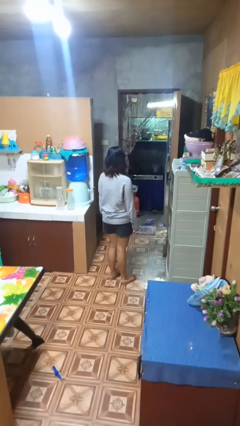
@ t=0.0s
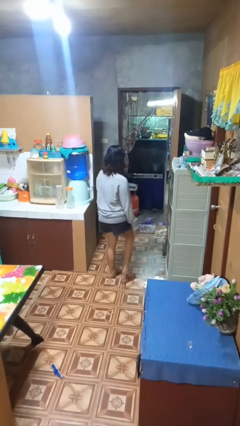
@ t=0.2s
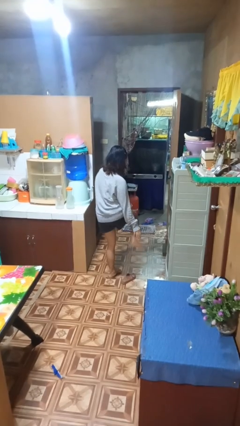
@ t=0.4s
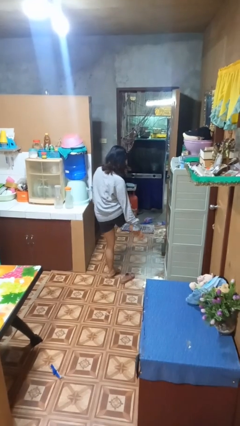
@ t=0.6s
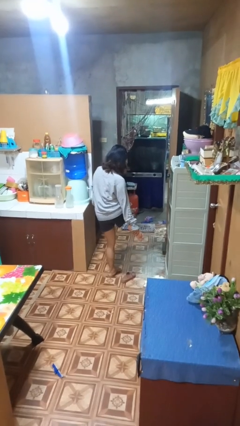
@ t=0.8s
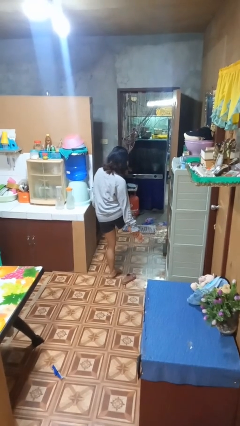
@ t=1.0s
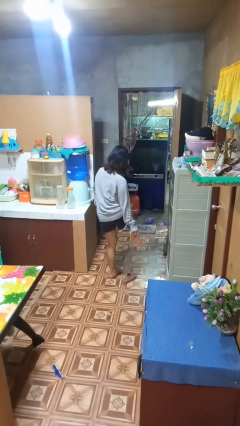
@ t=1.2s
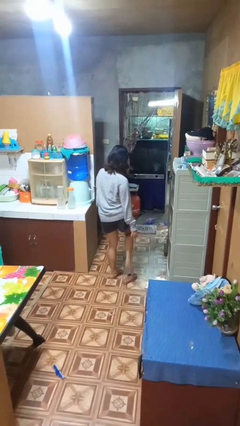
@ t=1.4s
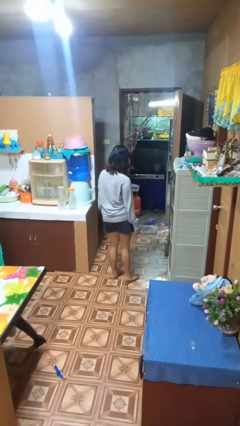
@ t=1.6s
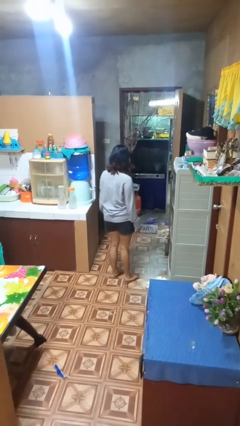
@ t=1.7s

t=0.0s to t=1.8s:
person rubs foot

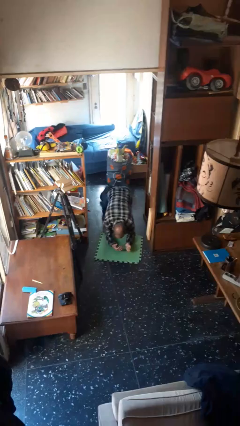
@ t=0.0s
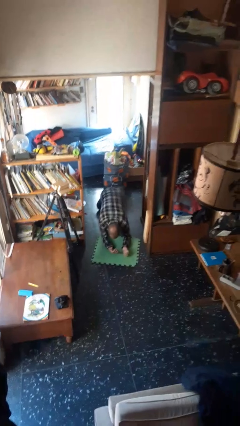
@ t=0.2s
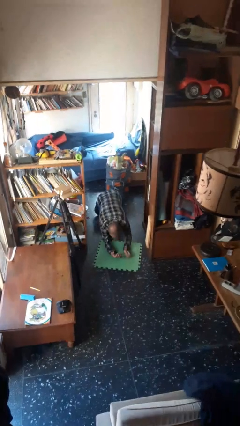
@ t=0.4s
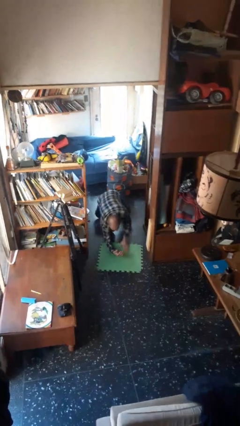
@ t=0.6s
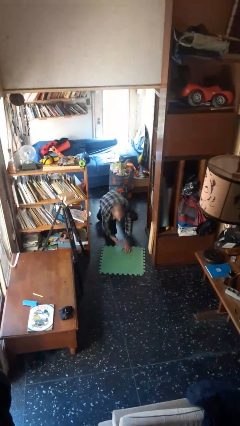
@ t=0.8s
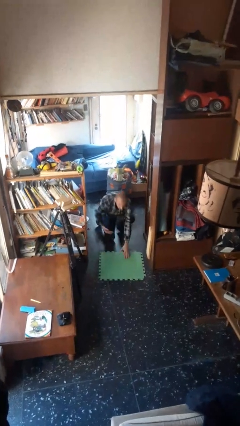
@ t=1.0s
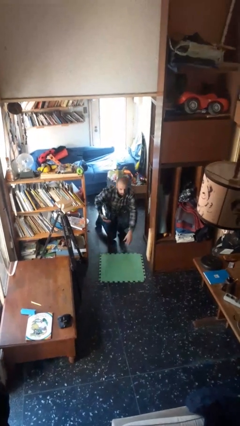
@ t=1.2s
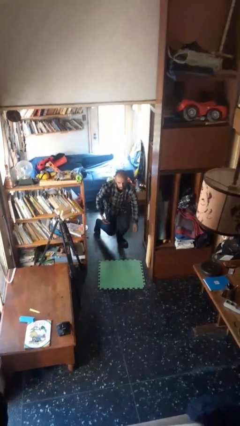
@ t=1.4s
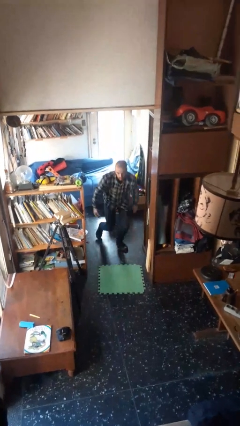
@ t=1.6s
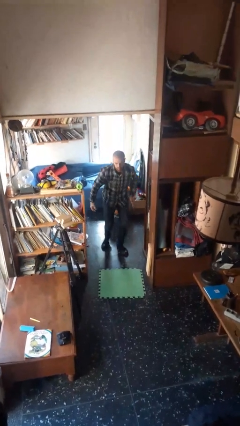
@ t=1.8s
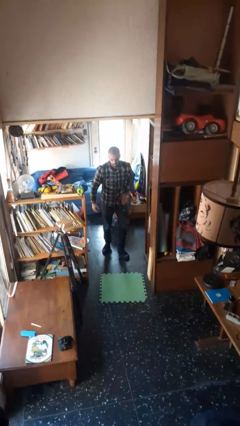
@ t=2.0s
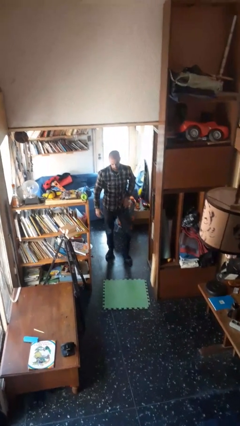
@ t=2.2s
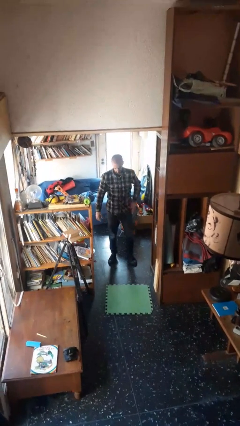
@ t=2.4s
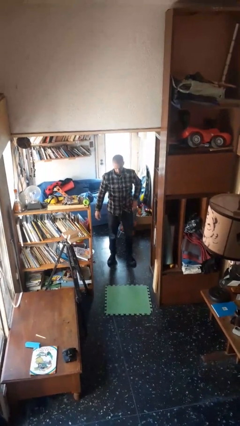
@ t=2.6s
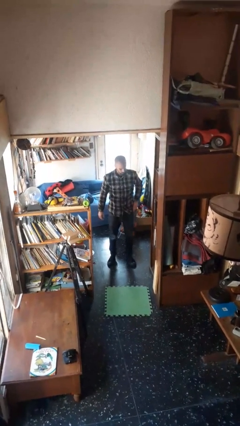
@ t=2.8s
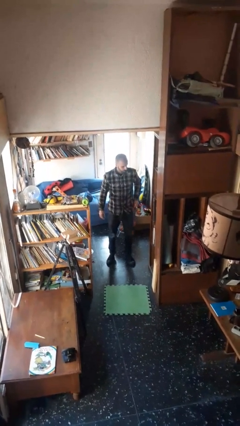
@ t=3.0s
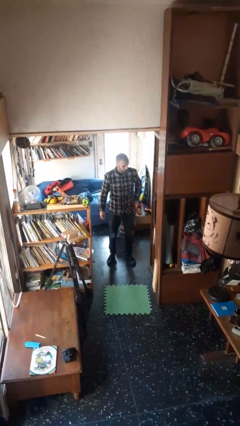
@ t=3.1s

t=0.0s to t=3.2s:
person stands up from floor

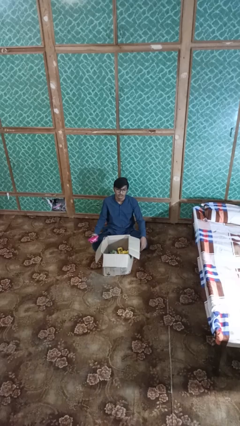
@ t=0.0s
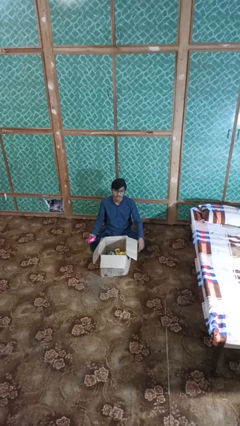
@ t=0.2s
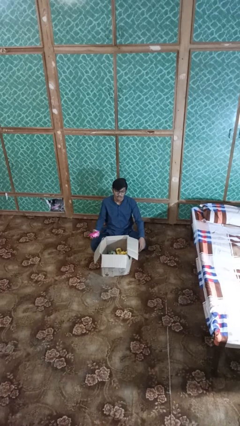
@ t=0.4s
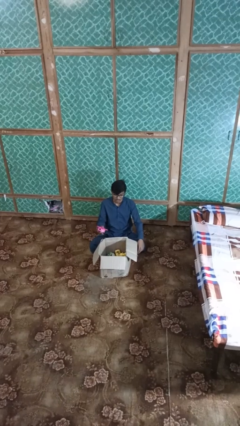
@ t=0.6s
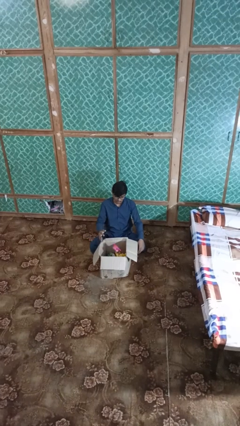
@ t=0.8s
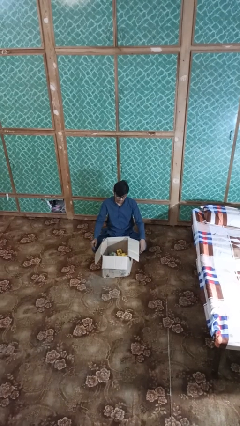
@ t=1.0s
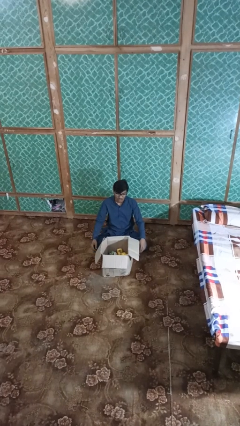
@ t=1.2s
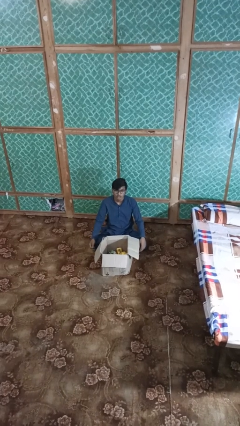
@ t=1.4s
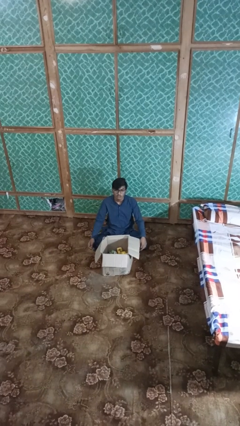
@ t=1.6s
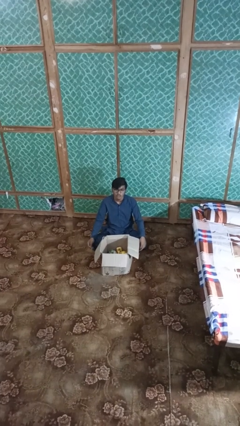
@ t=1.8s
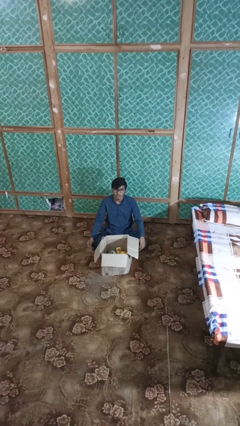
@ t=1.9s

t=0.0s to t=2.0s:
person puts object into box

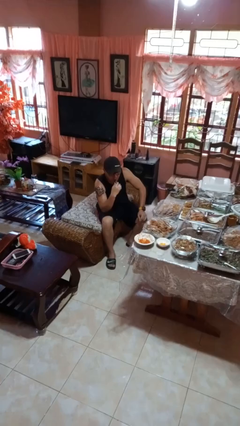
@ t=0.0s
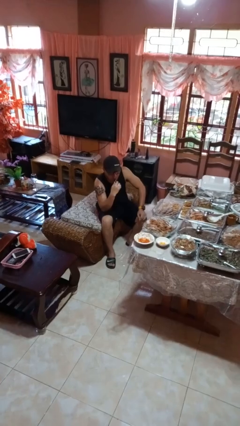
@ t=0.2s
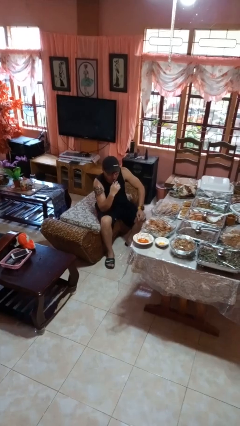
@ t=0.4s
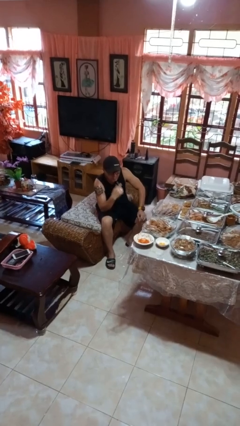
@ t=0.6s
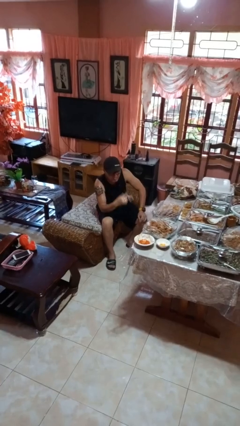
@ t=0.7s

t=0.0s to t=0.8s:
person vapes

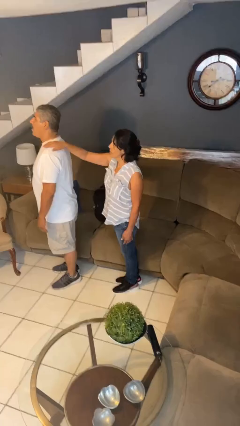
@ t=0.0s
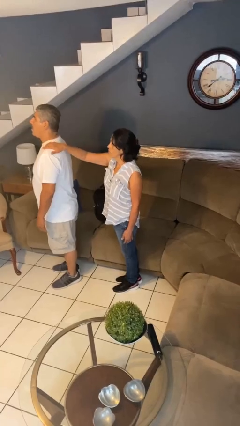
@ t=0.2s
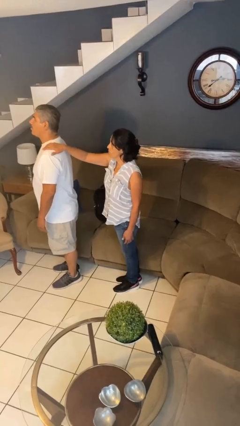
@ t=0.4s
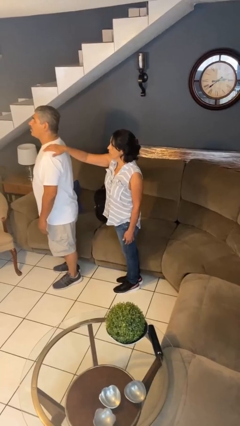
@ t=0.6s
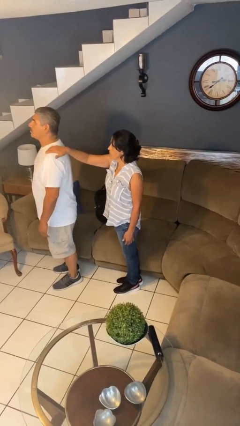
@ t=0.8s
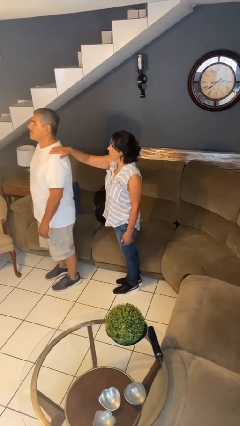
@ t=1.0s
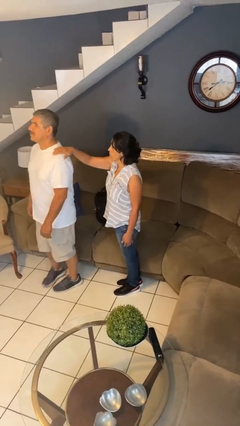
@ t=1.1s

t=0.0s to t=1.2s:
person grabs person by shoulder

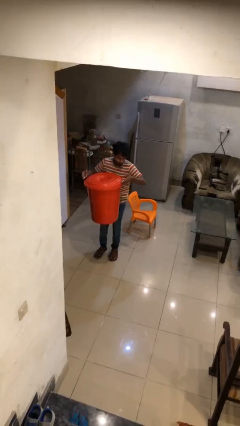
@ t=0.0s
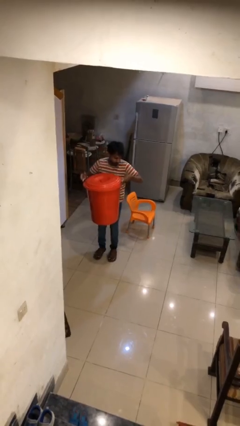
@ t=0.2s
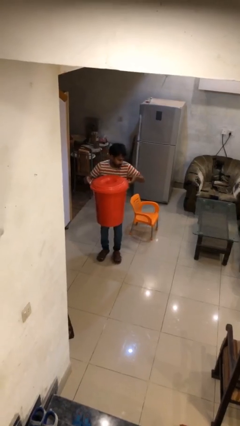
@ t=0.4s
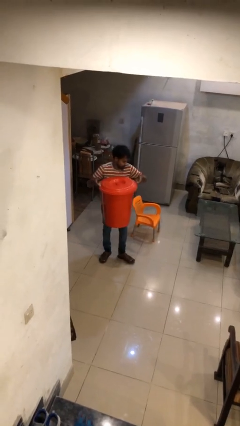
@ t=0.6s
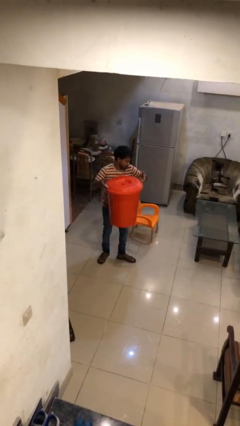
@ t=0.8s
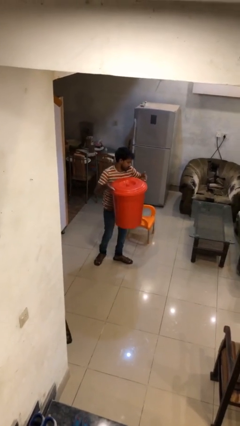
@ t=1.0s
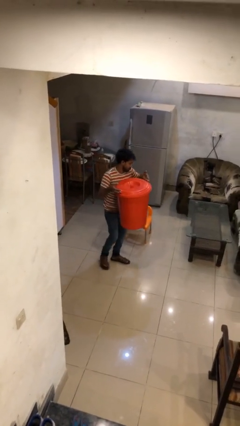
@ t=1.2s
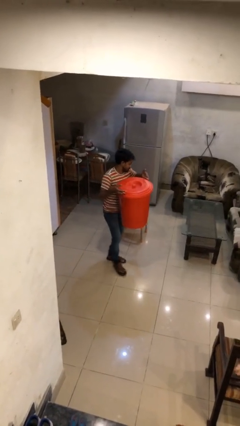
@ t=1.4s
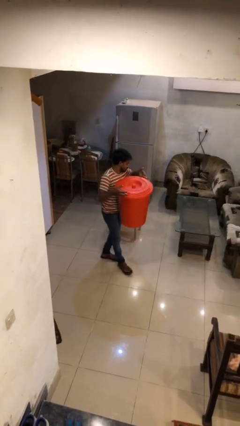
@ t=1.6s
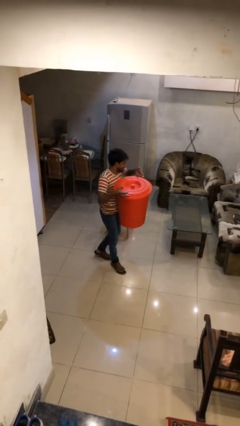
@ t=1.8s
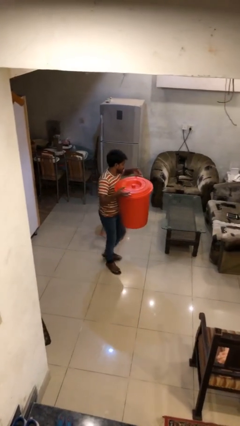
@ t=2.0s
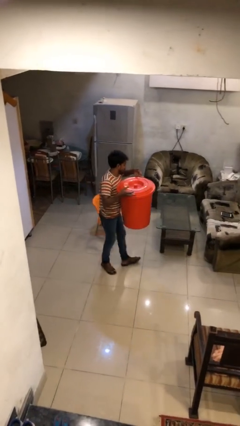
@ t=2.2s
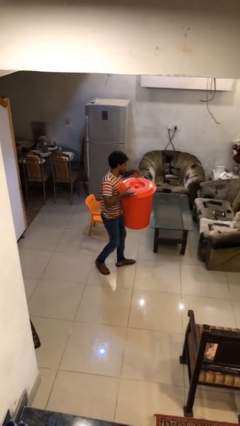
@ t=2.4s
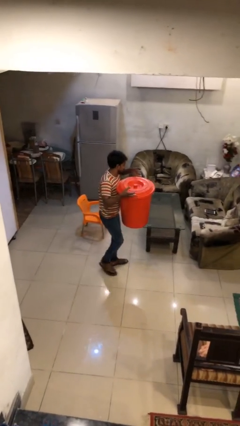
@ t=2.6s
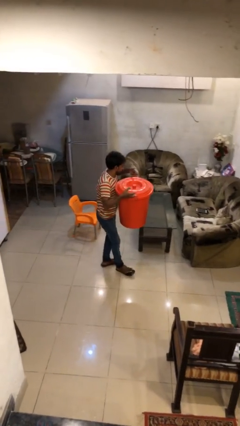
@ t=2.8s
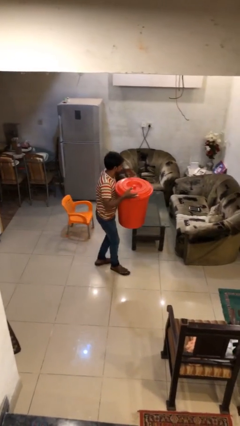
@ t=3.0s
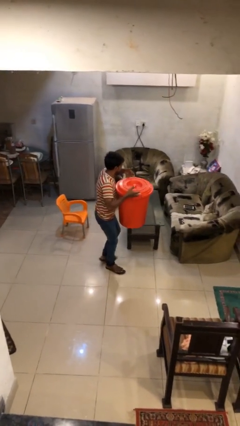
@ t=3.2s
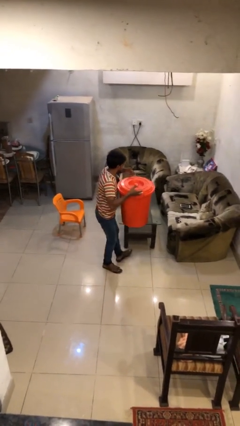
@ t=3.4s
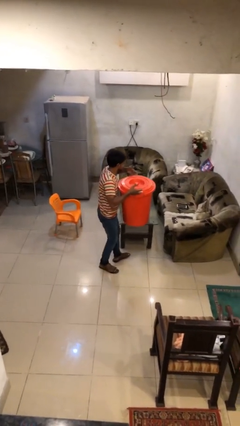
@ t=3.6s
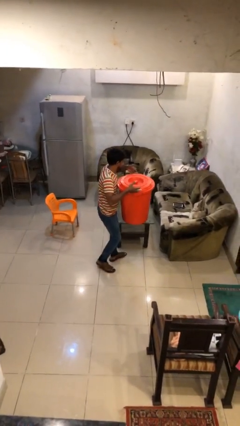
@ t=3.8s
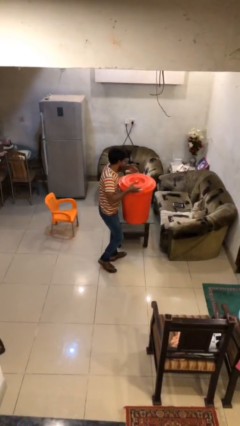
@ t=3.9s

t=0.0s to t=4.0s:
person carries heavy object

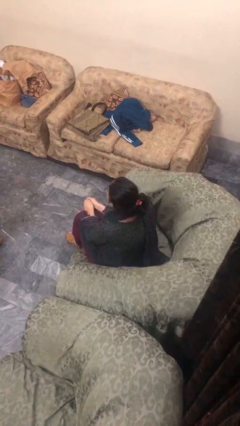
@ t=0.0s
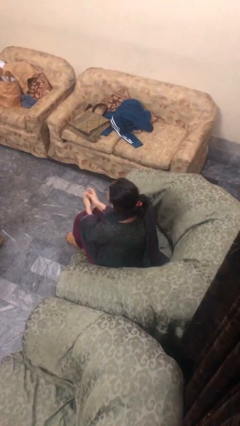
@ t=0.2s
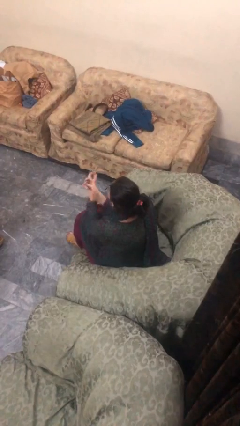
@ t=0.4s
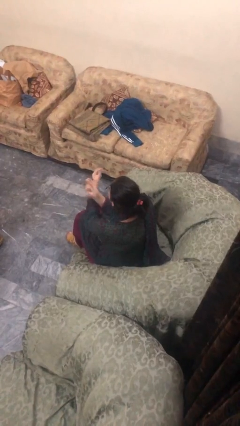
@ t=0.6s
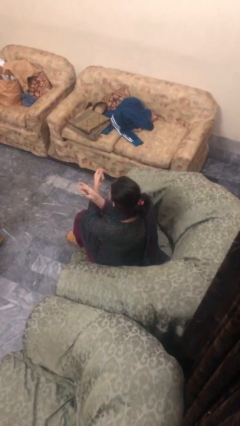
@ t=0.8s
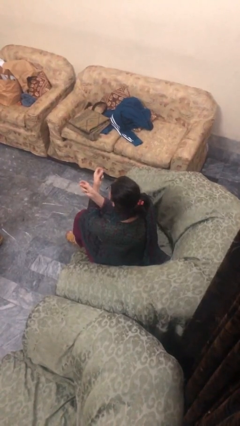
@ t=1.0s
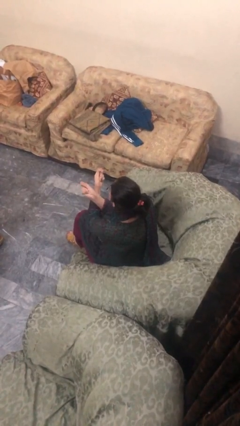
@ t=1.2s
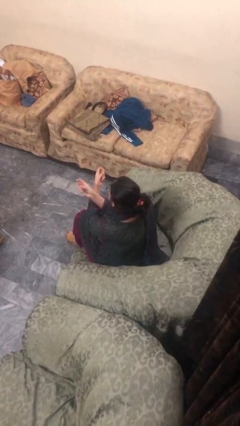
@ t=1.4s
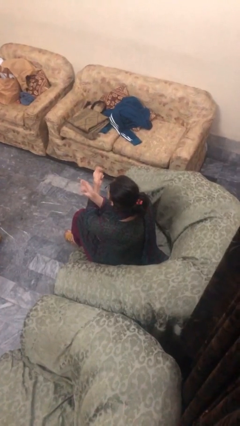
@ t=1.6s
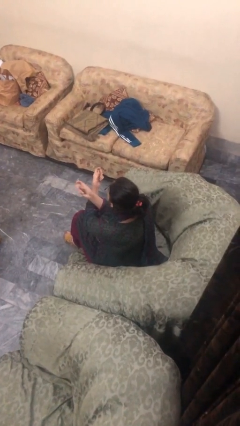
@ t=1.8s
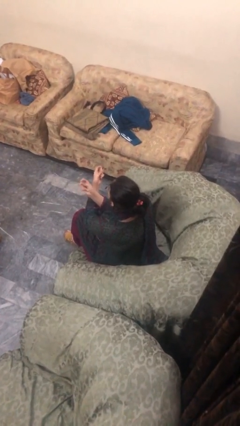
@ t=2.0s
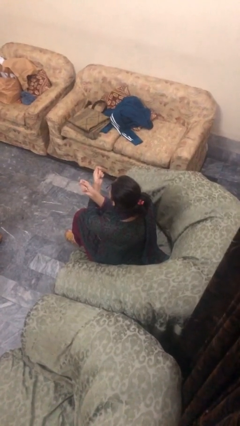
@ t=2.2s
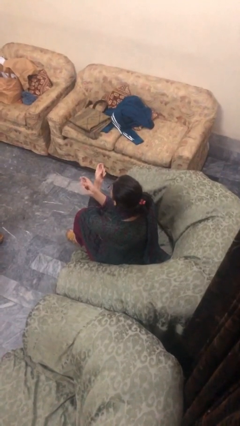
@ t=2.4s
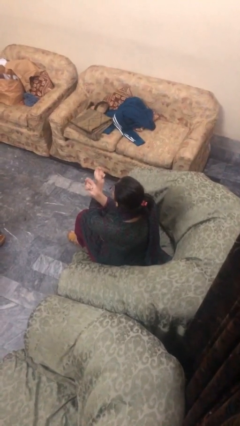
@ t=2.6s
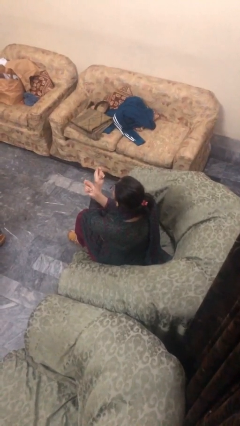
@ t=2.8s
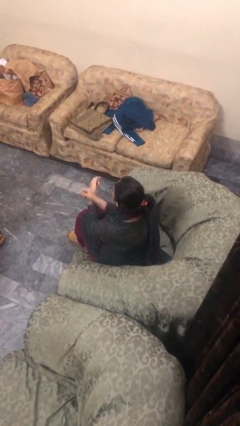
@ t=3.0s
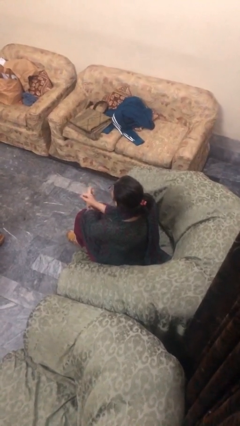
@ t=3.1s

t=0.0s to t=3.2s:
person snaps fingers

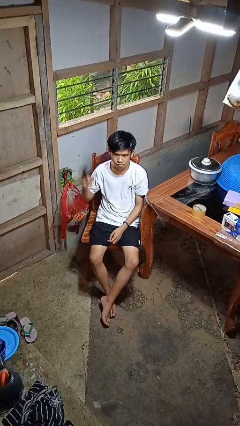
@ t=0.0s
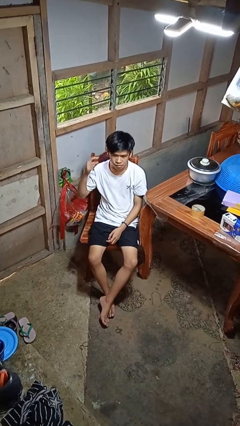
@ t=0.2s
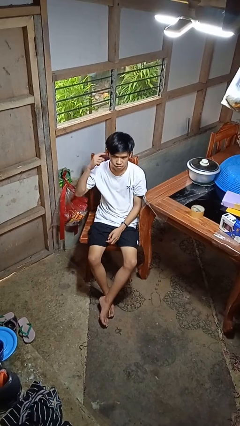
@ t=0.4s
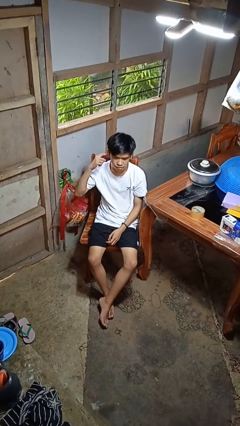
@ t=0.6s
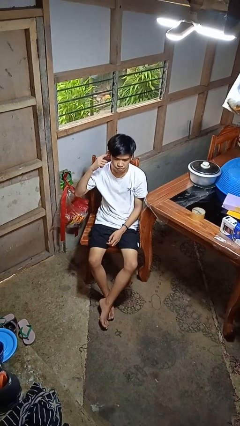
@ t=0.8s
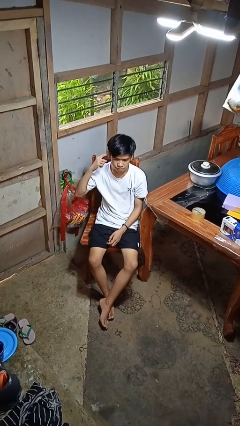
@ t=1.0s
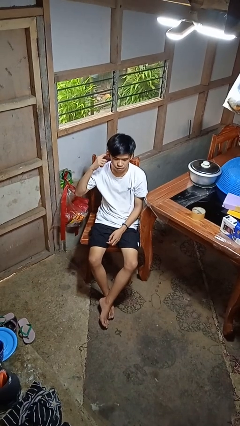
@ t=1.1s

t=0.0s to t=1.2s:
person gestures listen closely
